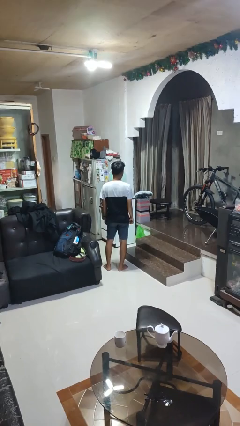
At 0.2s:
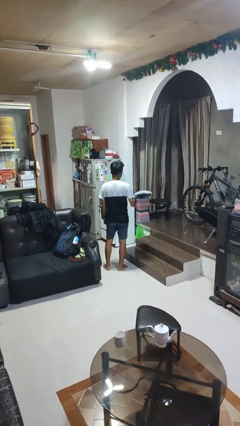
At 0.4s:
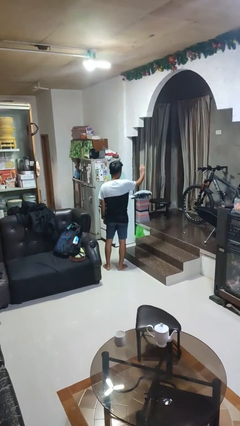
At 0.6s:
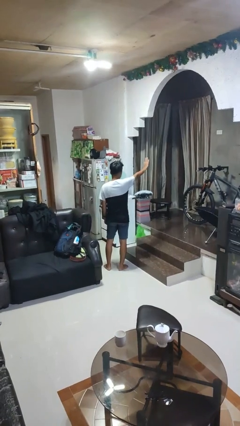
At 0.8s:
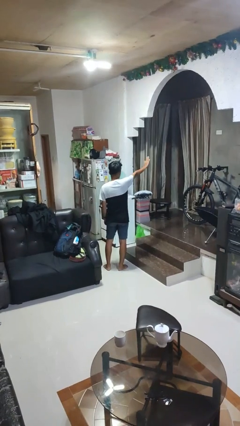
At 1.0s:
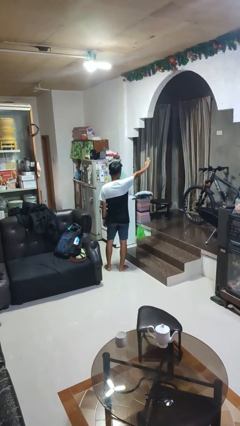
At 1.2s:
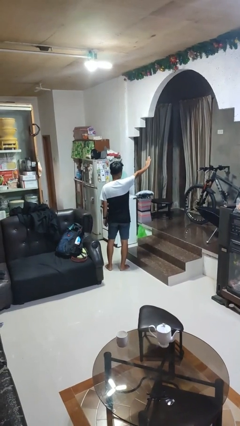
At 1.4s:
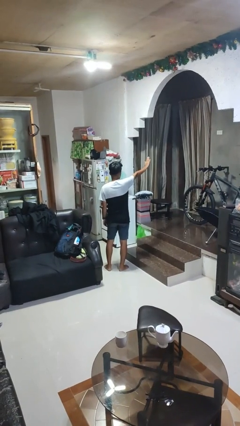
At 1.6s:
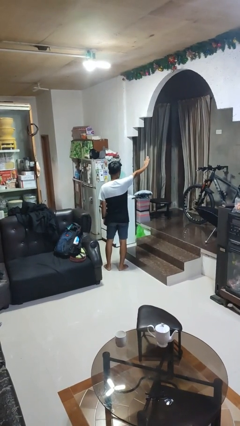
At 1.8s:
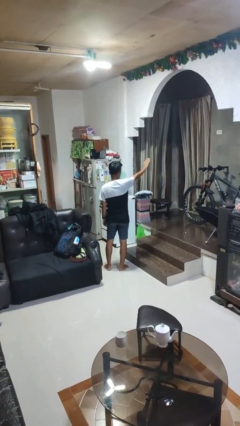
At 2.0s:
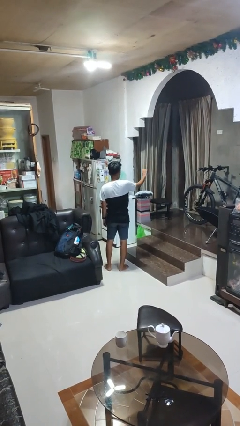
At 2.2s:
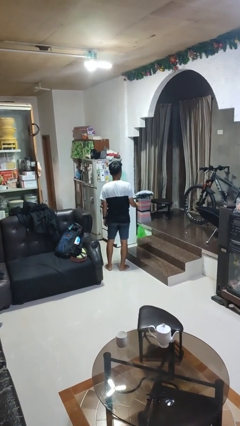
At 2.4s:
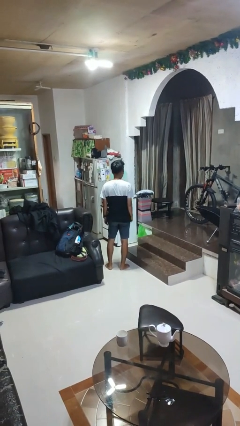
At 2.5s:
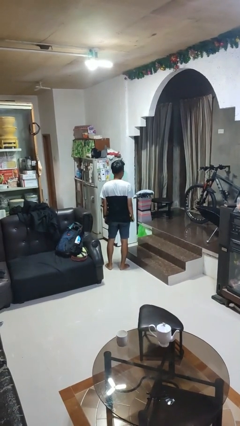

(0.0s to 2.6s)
person gestures stop

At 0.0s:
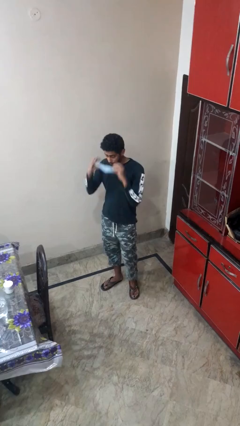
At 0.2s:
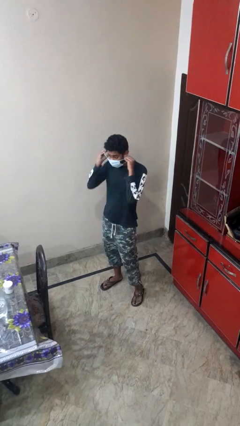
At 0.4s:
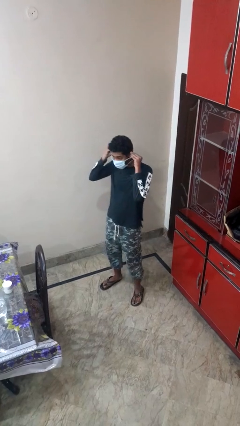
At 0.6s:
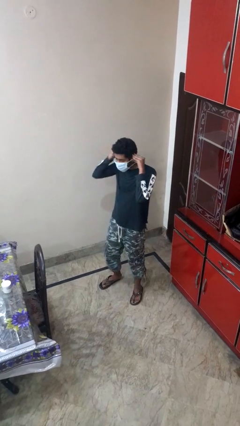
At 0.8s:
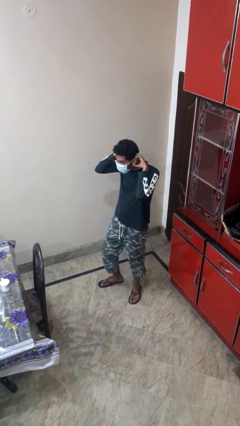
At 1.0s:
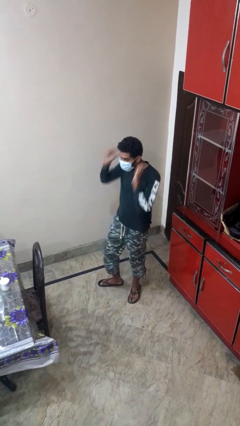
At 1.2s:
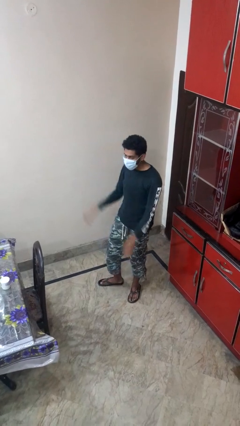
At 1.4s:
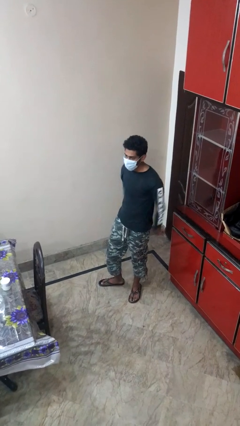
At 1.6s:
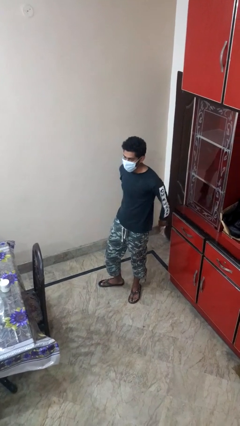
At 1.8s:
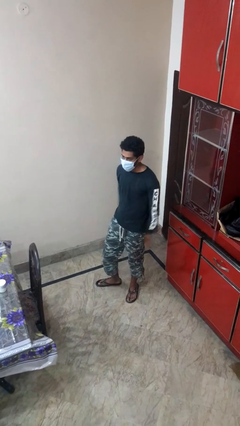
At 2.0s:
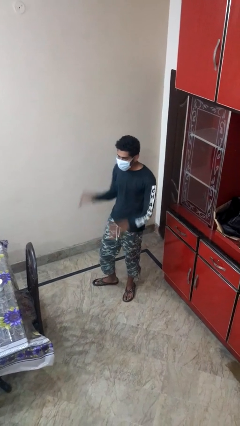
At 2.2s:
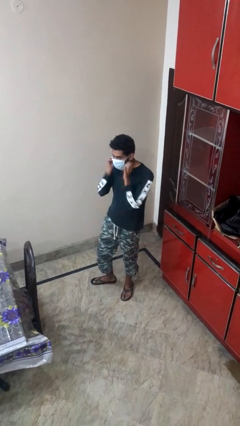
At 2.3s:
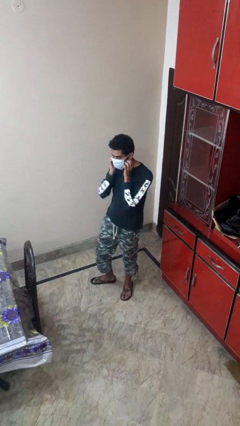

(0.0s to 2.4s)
person puts on facemask

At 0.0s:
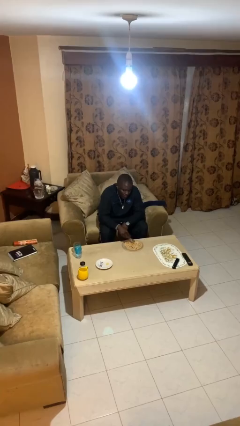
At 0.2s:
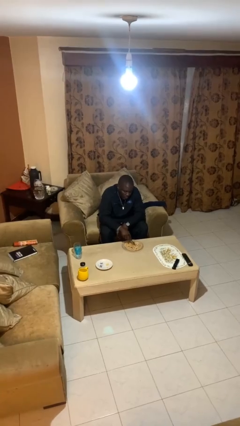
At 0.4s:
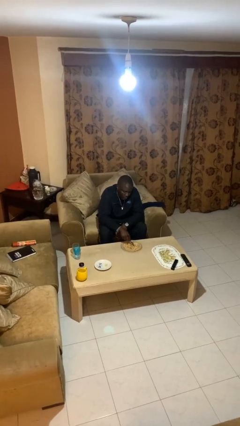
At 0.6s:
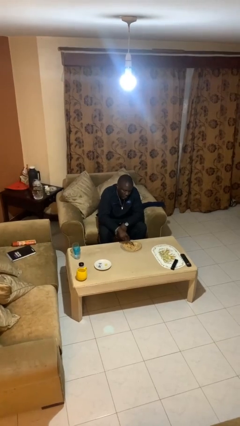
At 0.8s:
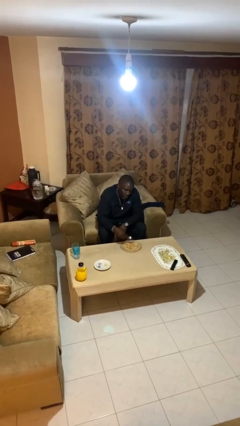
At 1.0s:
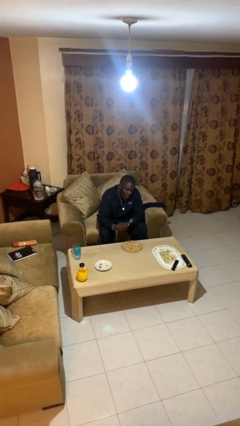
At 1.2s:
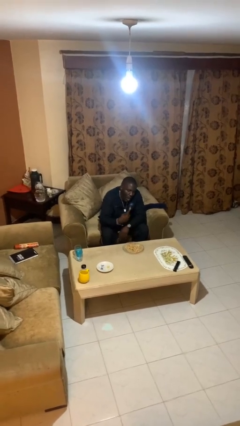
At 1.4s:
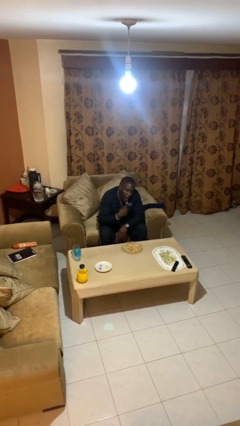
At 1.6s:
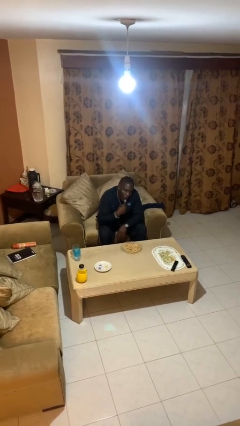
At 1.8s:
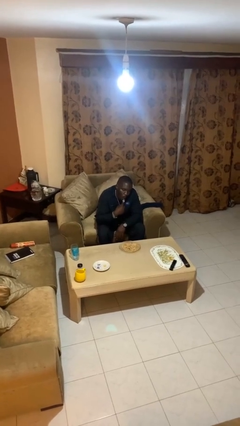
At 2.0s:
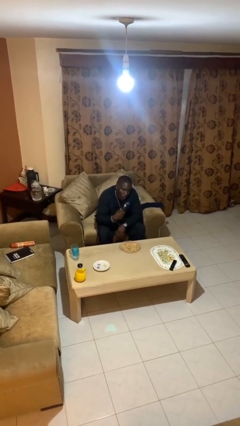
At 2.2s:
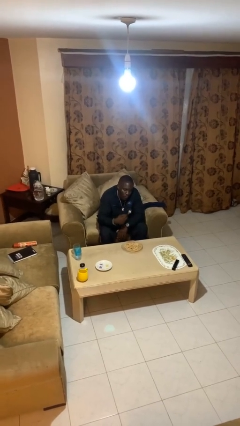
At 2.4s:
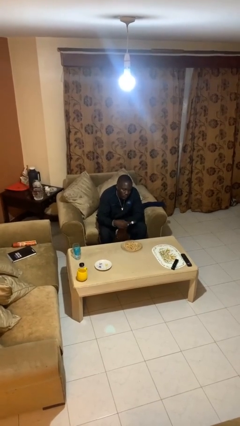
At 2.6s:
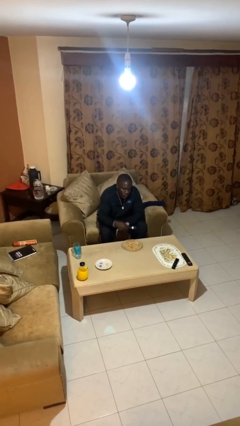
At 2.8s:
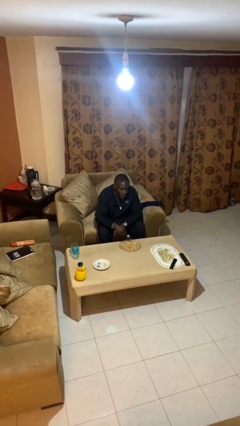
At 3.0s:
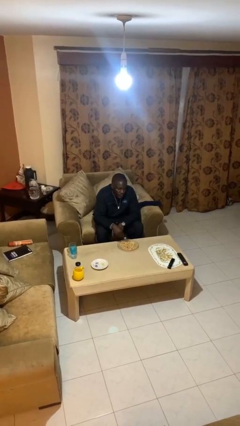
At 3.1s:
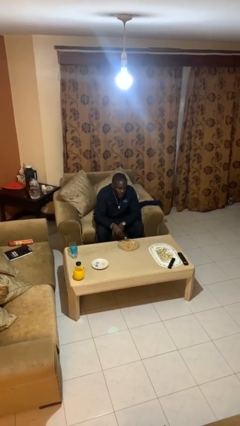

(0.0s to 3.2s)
person eats with utensil

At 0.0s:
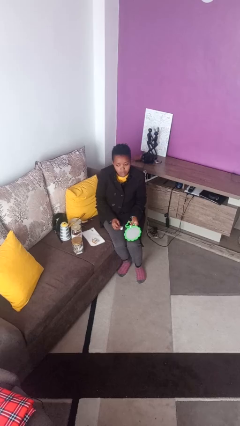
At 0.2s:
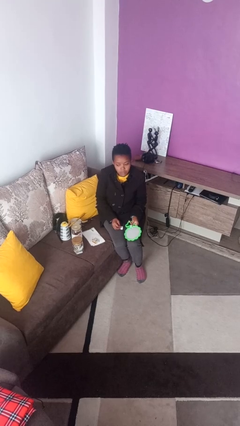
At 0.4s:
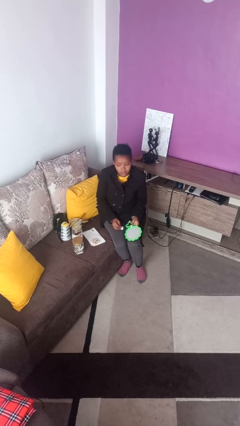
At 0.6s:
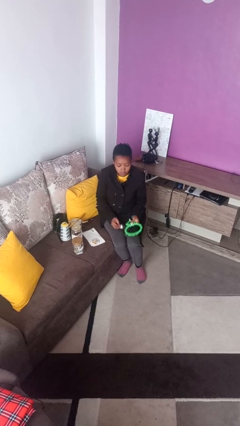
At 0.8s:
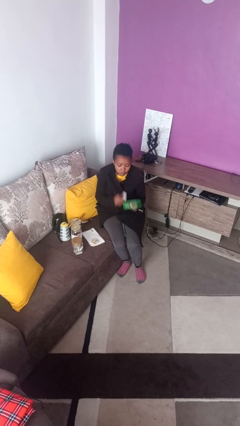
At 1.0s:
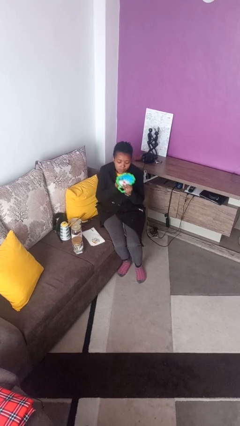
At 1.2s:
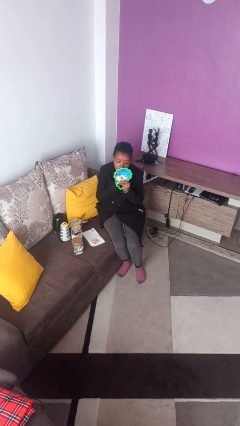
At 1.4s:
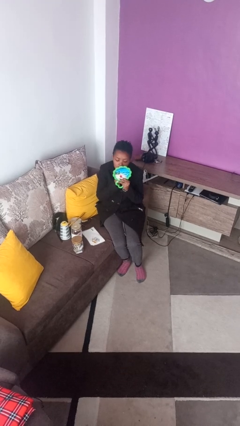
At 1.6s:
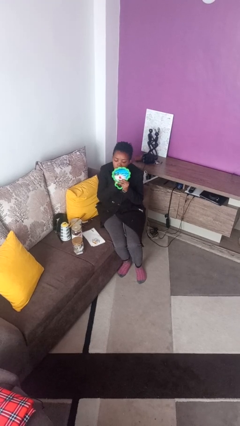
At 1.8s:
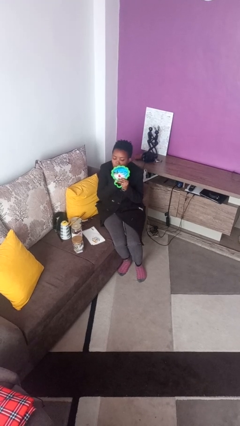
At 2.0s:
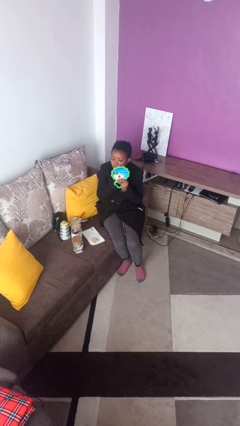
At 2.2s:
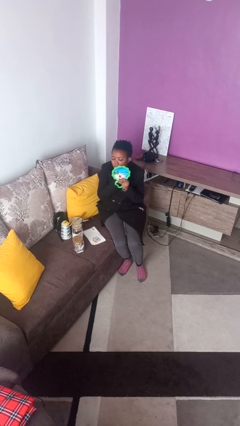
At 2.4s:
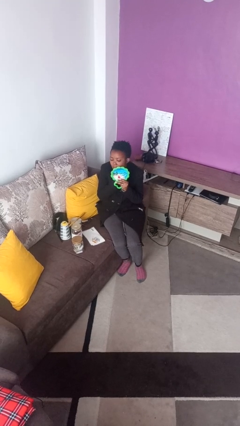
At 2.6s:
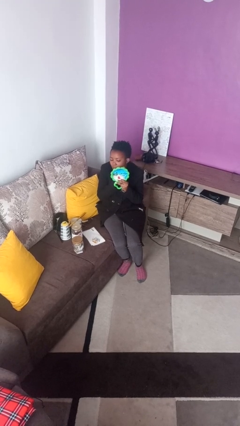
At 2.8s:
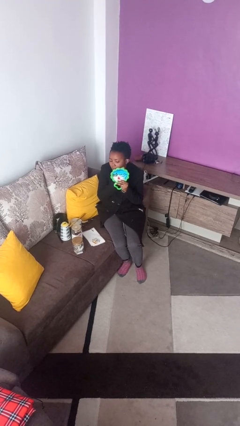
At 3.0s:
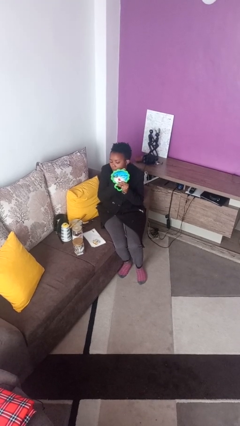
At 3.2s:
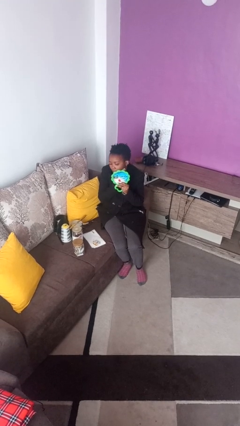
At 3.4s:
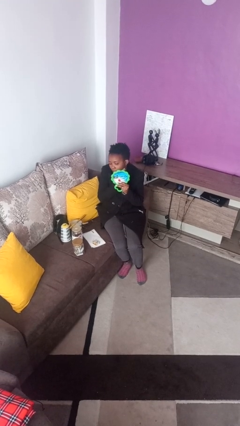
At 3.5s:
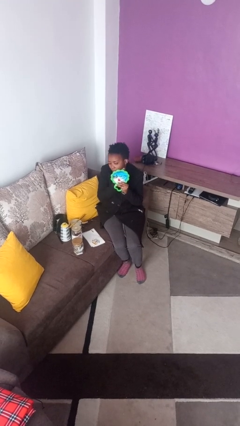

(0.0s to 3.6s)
person applies foundation makeup

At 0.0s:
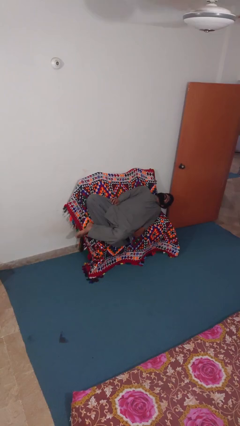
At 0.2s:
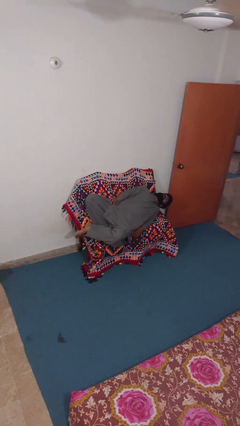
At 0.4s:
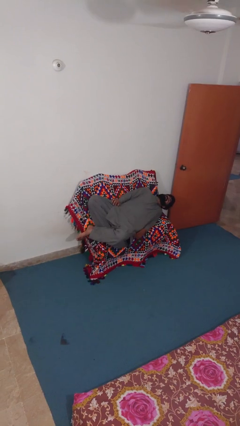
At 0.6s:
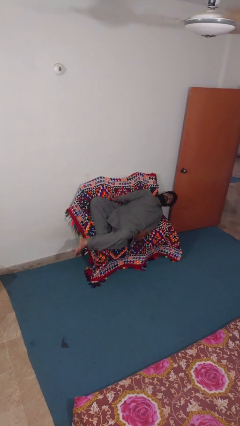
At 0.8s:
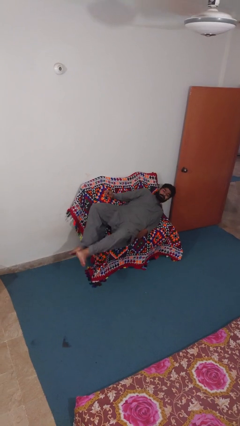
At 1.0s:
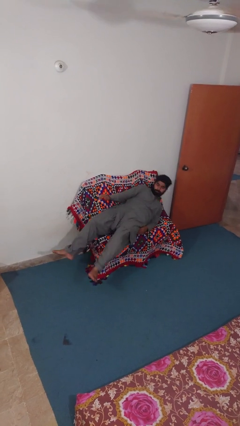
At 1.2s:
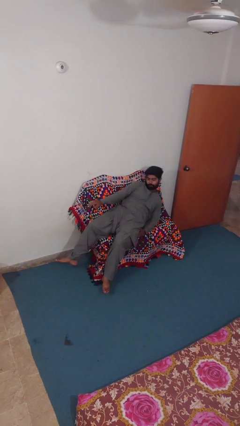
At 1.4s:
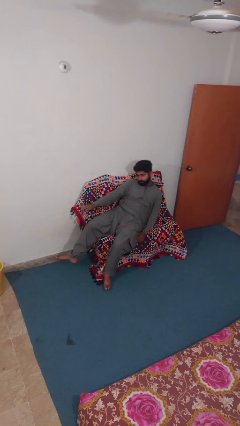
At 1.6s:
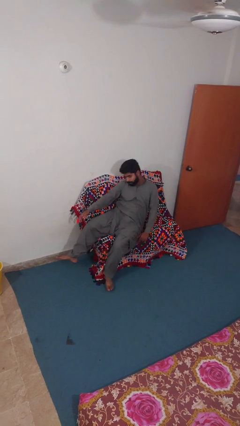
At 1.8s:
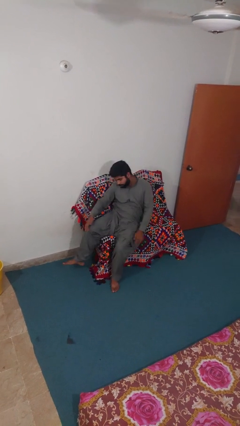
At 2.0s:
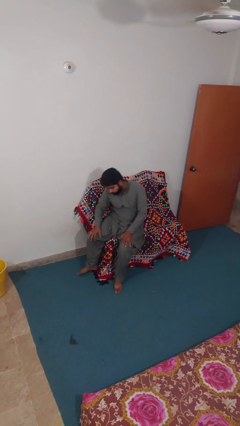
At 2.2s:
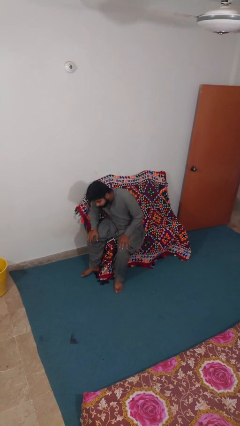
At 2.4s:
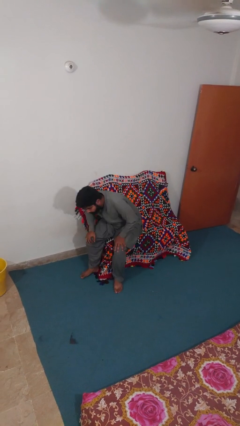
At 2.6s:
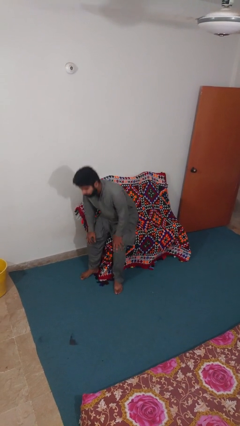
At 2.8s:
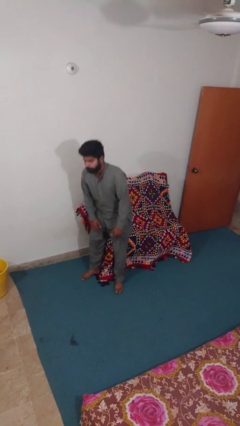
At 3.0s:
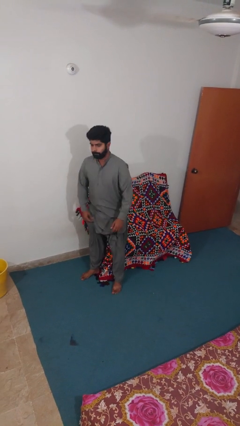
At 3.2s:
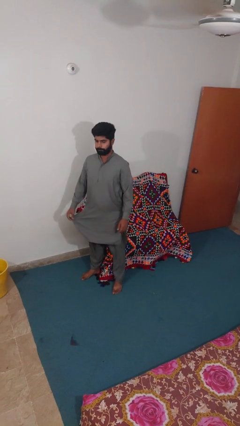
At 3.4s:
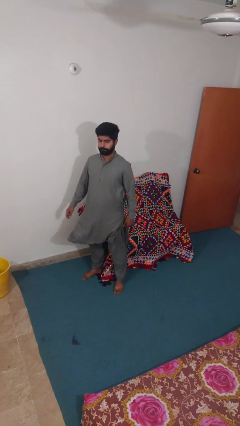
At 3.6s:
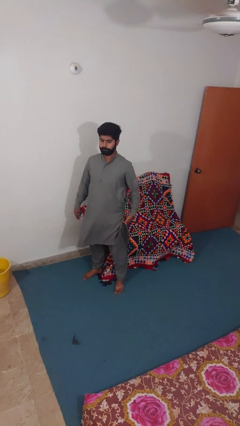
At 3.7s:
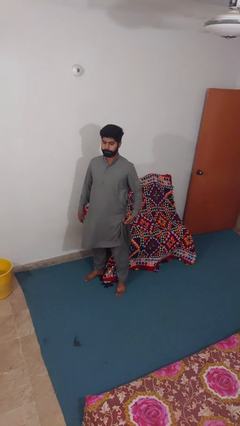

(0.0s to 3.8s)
person stands up

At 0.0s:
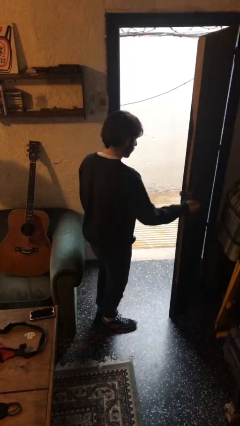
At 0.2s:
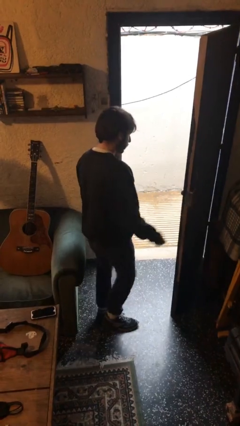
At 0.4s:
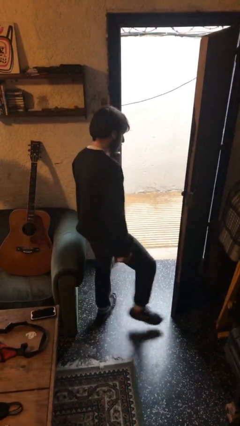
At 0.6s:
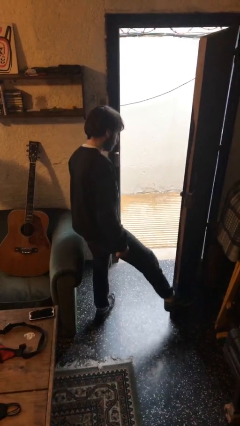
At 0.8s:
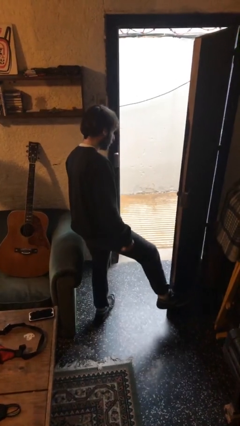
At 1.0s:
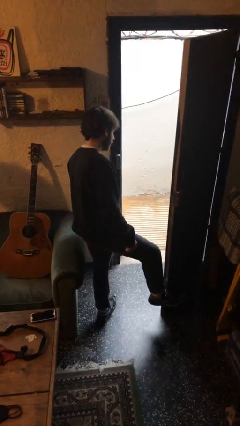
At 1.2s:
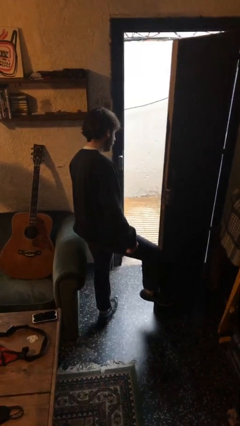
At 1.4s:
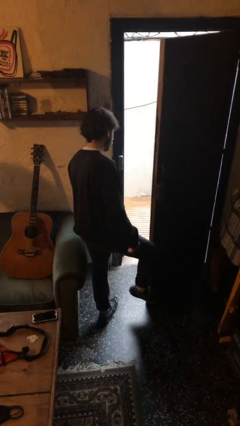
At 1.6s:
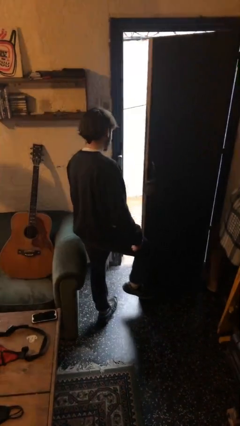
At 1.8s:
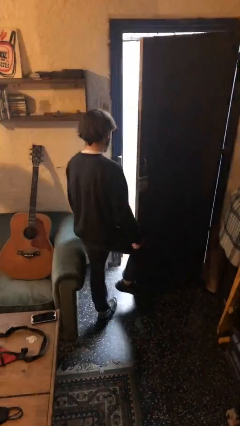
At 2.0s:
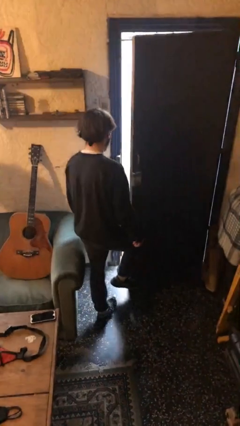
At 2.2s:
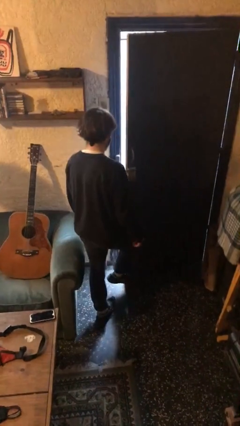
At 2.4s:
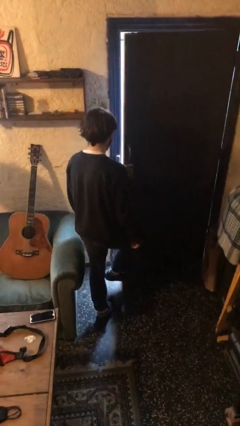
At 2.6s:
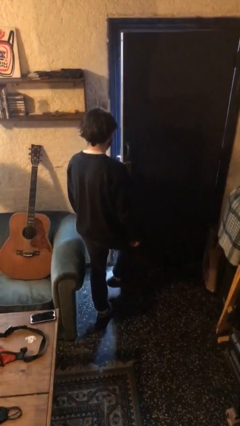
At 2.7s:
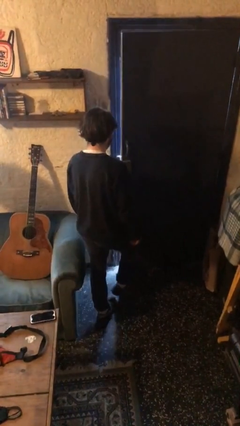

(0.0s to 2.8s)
person closes door with foot
